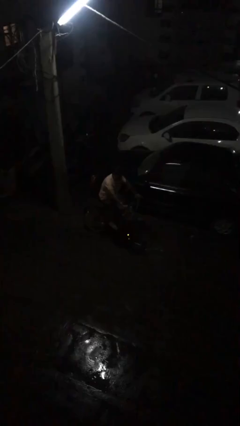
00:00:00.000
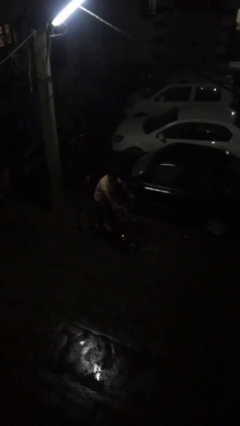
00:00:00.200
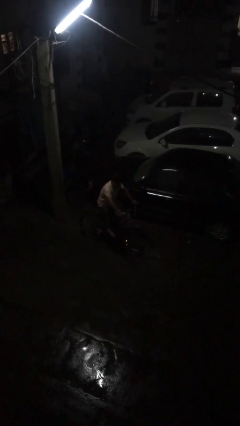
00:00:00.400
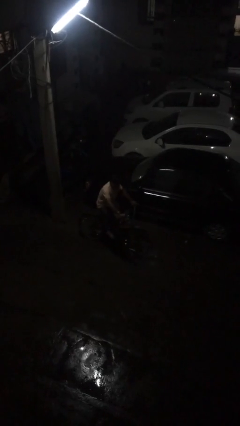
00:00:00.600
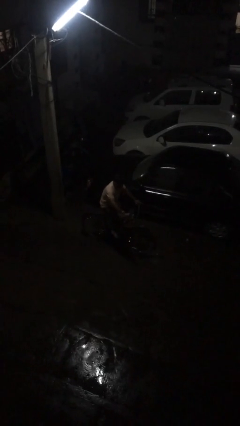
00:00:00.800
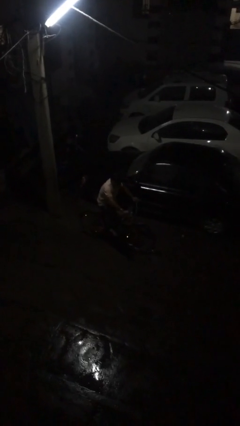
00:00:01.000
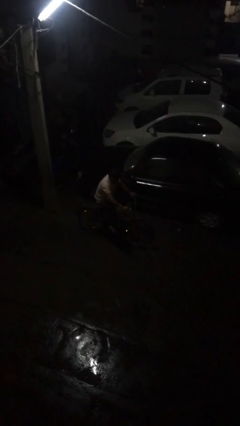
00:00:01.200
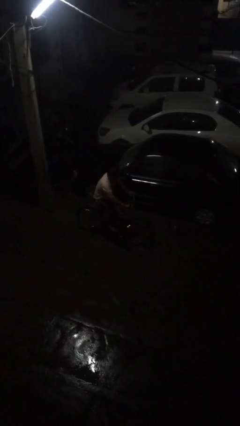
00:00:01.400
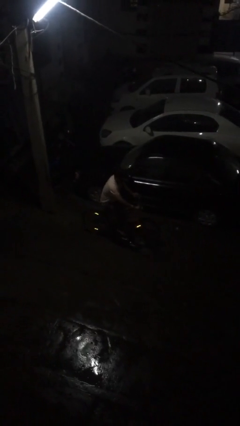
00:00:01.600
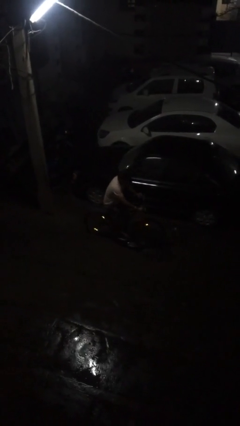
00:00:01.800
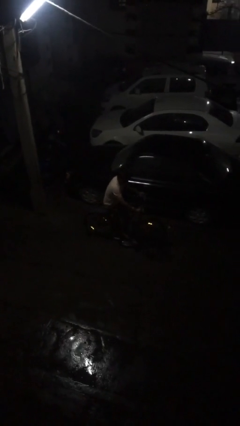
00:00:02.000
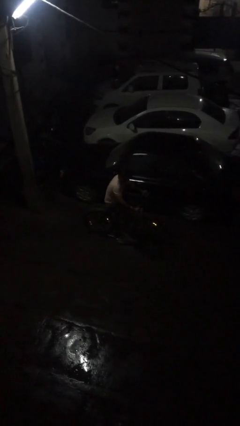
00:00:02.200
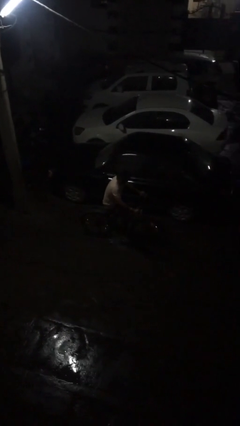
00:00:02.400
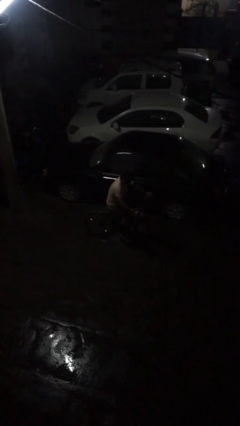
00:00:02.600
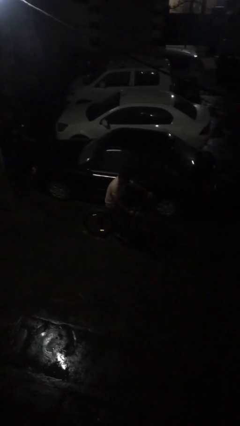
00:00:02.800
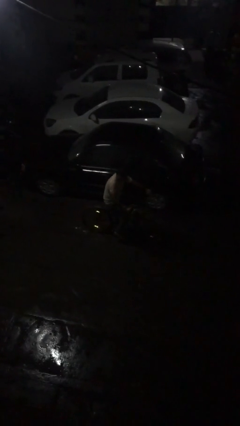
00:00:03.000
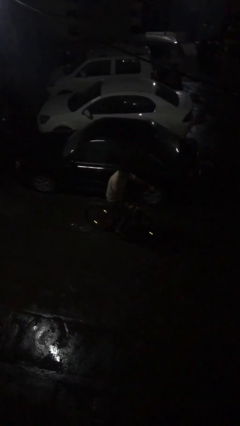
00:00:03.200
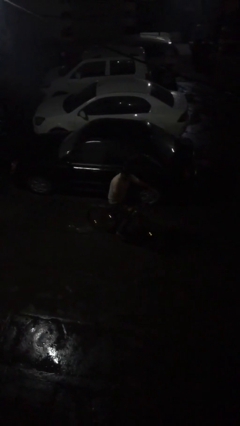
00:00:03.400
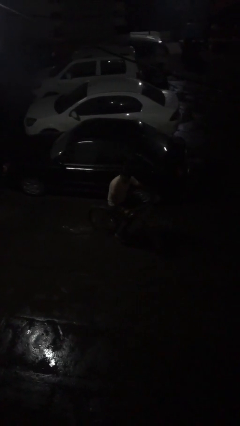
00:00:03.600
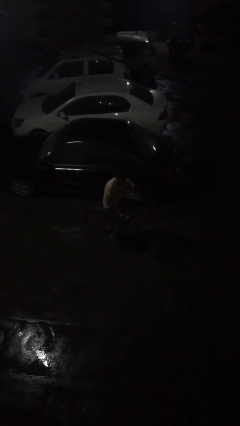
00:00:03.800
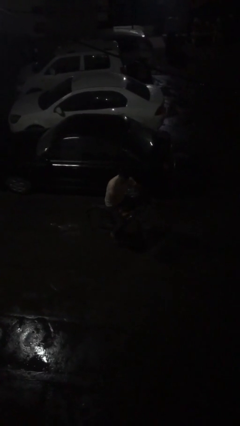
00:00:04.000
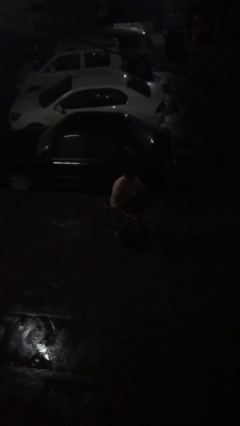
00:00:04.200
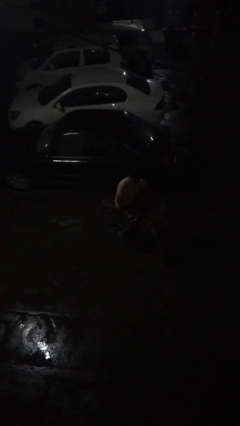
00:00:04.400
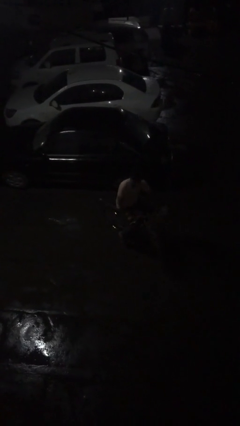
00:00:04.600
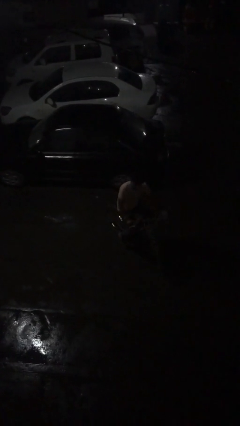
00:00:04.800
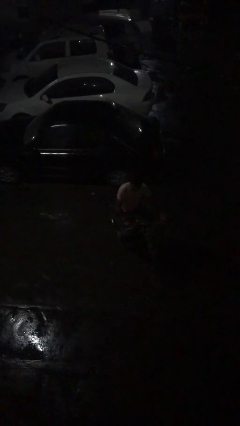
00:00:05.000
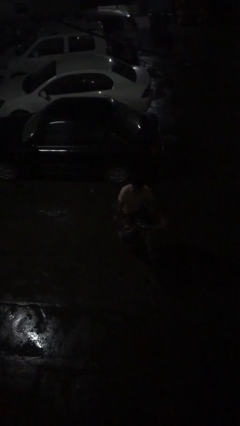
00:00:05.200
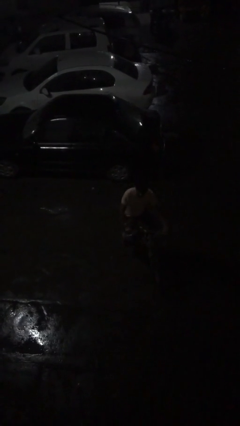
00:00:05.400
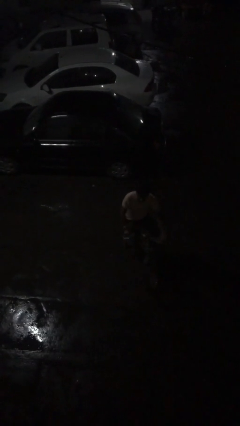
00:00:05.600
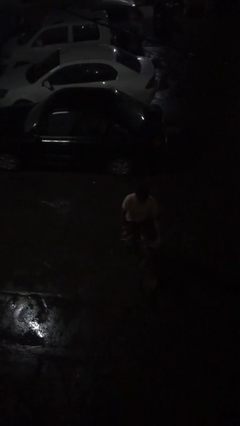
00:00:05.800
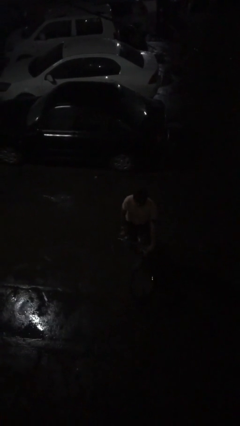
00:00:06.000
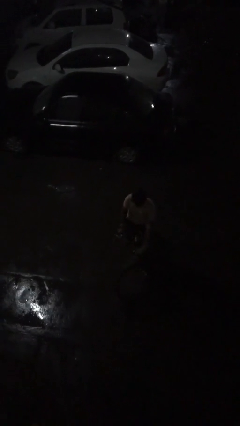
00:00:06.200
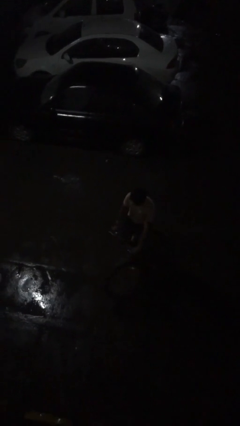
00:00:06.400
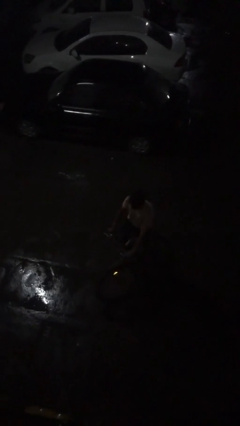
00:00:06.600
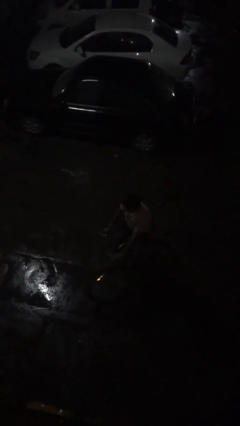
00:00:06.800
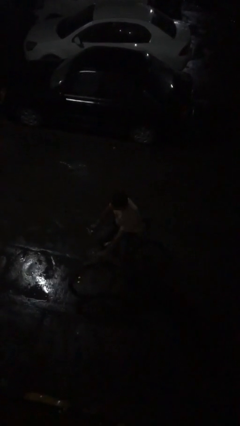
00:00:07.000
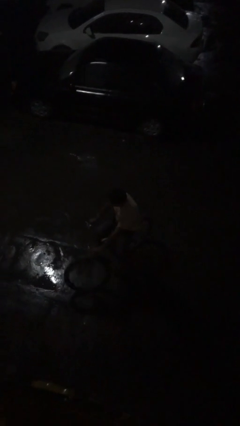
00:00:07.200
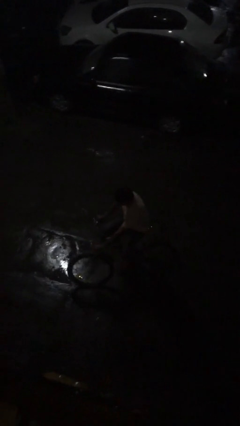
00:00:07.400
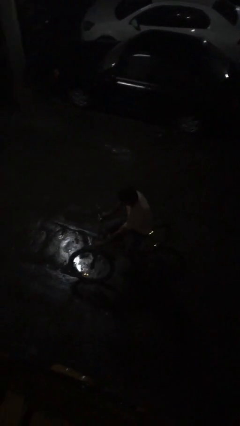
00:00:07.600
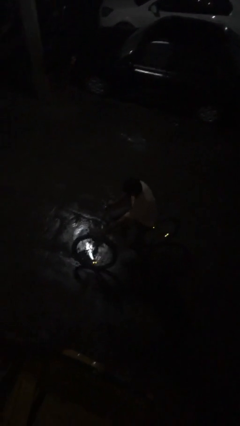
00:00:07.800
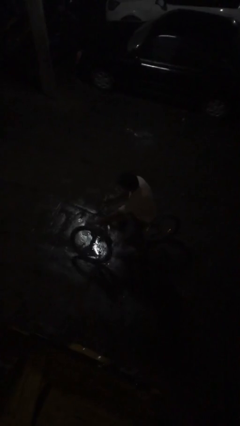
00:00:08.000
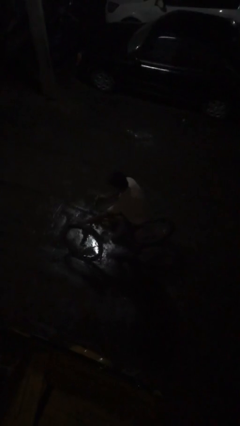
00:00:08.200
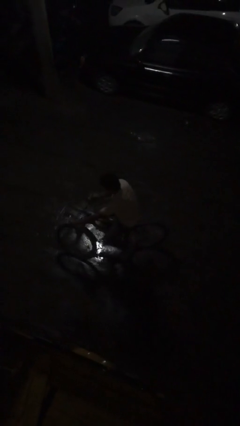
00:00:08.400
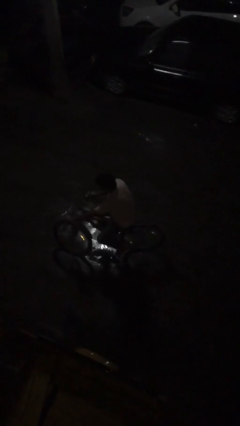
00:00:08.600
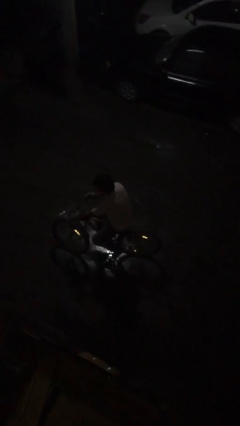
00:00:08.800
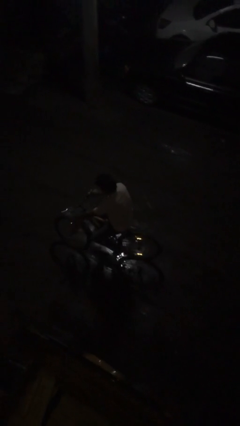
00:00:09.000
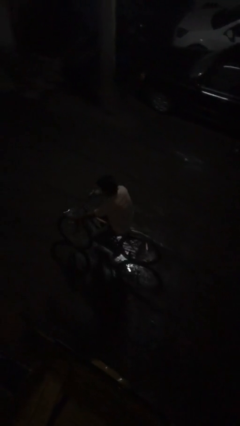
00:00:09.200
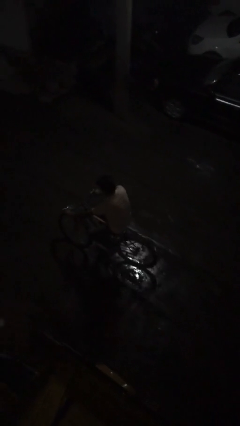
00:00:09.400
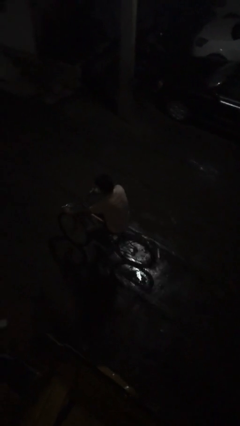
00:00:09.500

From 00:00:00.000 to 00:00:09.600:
person rides bicycle

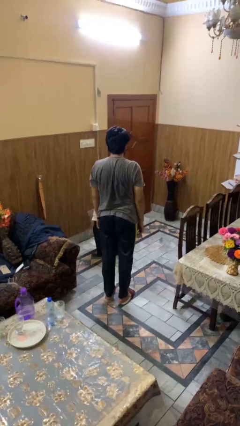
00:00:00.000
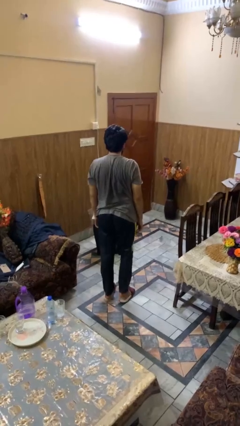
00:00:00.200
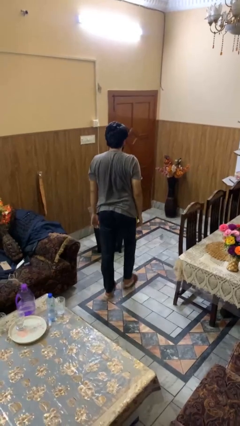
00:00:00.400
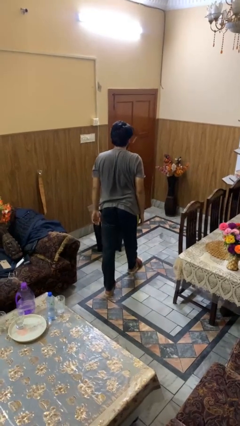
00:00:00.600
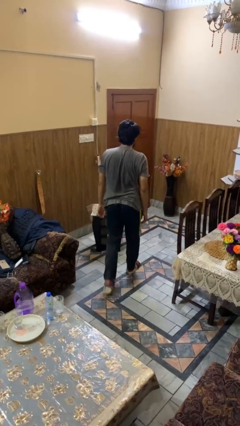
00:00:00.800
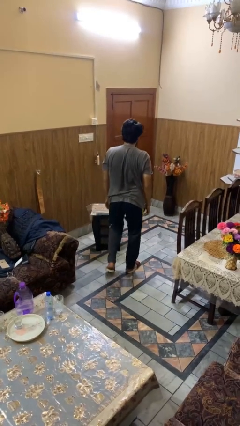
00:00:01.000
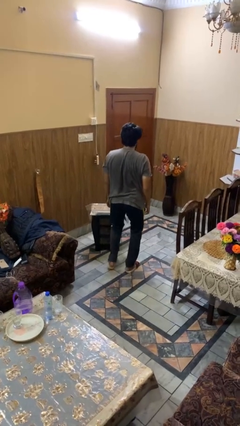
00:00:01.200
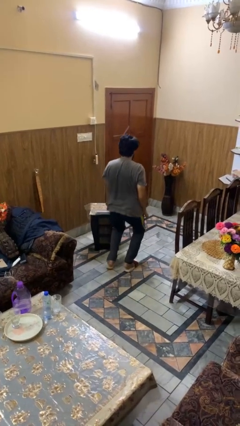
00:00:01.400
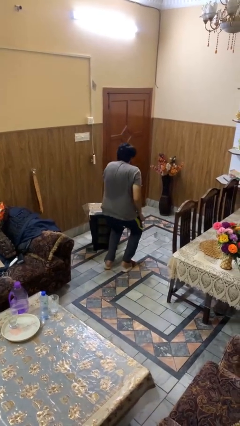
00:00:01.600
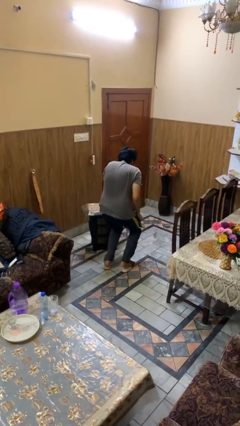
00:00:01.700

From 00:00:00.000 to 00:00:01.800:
person trips on object on floor

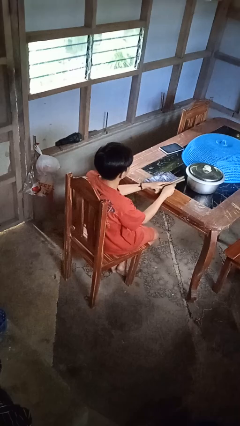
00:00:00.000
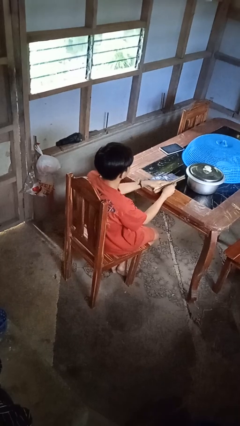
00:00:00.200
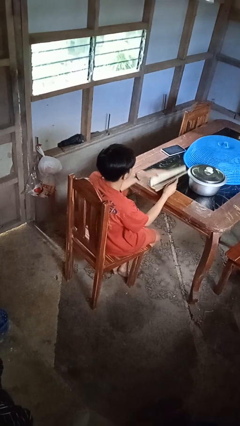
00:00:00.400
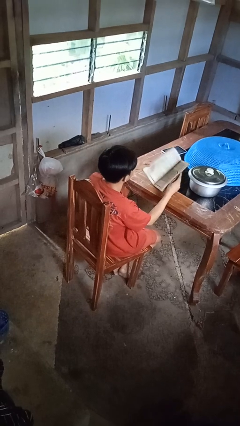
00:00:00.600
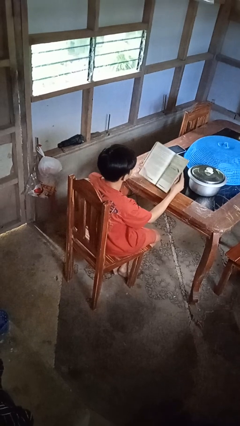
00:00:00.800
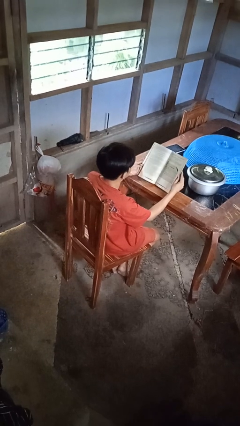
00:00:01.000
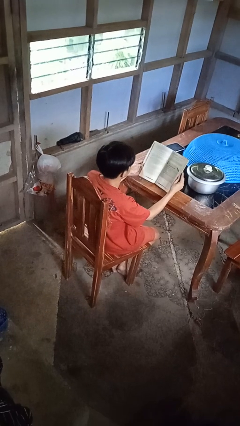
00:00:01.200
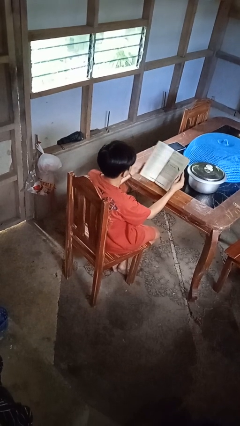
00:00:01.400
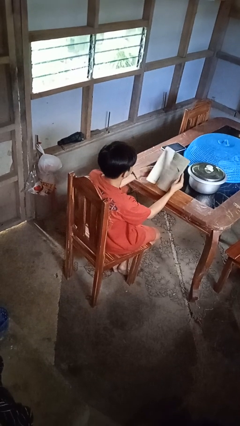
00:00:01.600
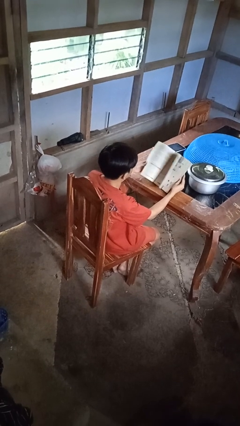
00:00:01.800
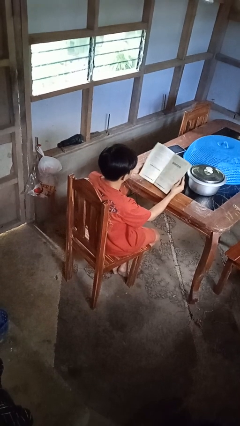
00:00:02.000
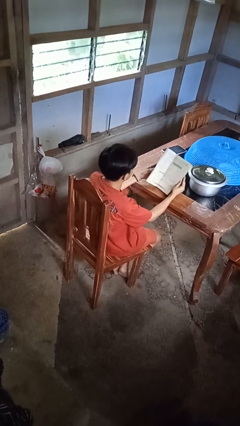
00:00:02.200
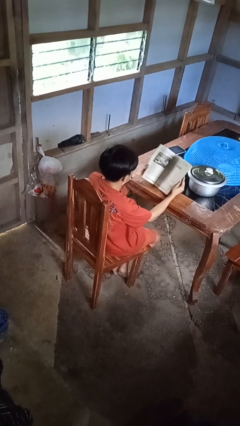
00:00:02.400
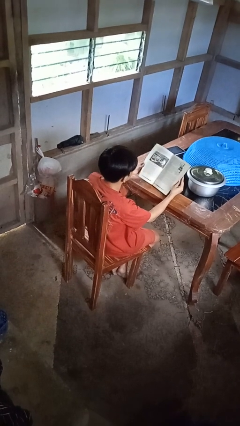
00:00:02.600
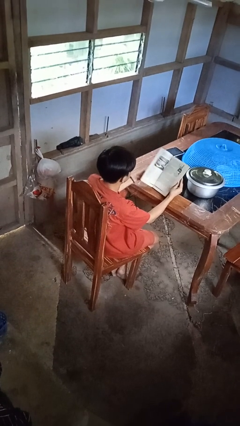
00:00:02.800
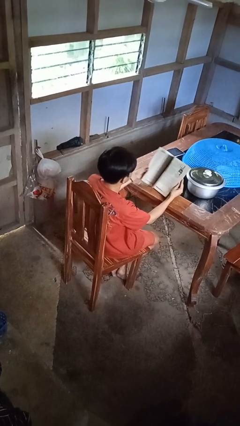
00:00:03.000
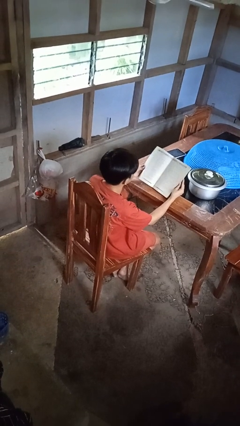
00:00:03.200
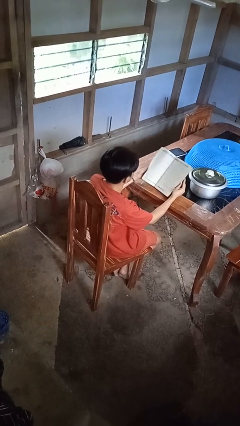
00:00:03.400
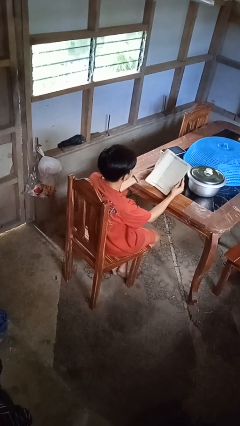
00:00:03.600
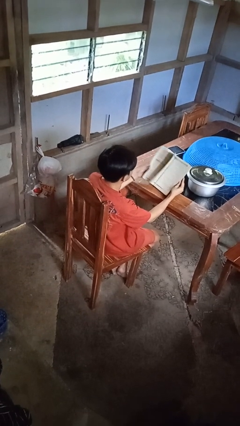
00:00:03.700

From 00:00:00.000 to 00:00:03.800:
person reads book

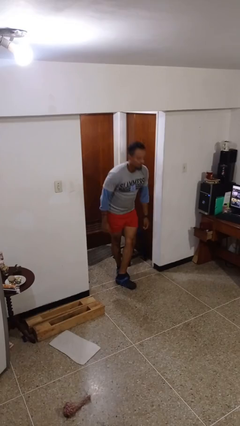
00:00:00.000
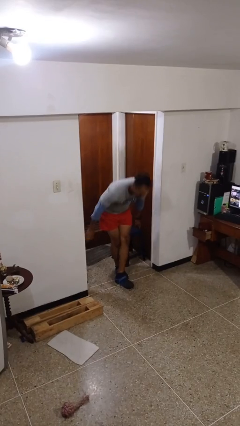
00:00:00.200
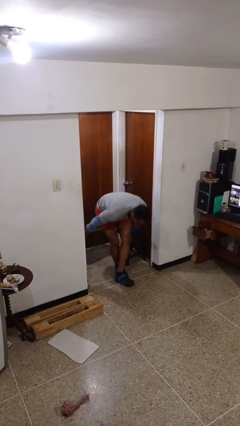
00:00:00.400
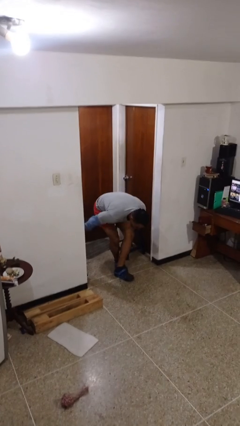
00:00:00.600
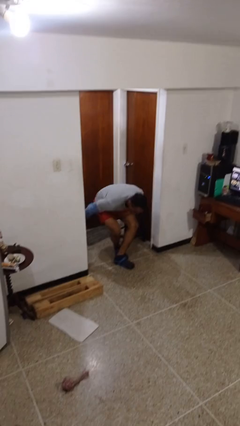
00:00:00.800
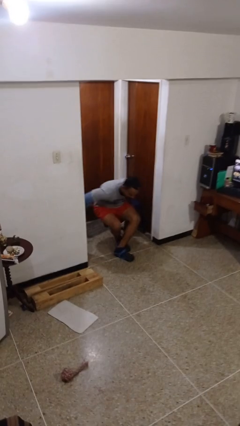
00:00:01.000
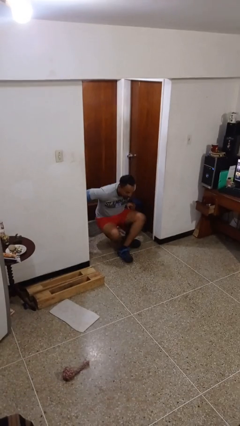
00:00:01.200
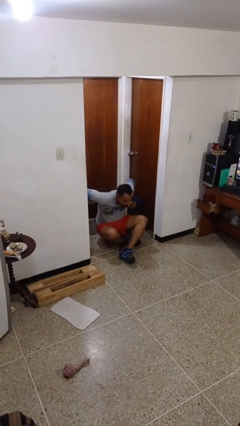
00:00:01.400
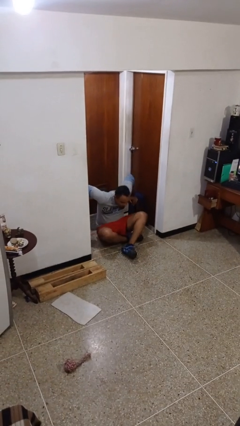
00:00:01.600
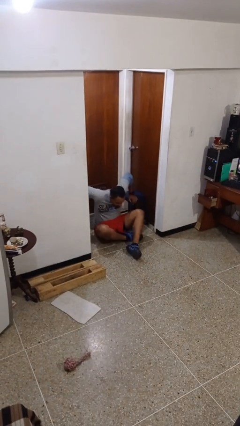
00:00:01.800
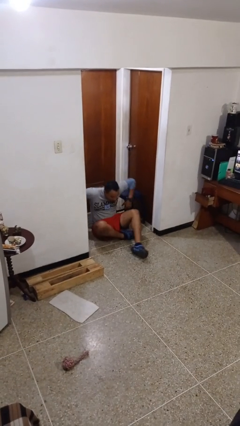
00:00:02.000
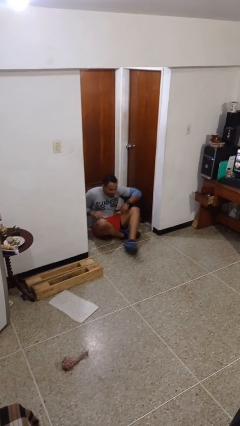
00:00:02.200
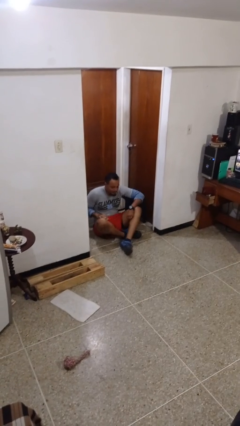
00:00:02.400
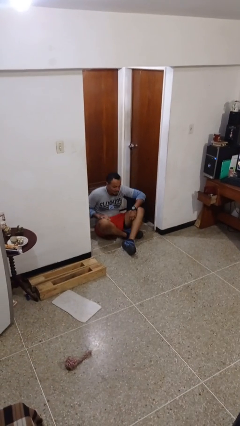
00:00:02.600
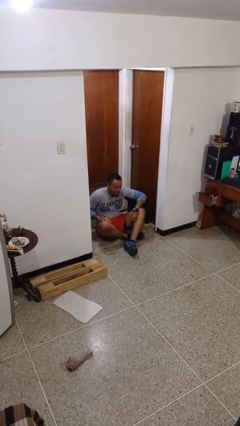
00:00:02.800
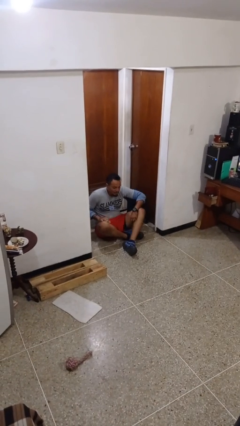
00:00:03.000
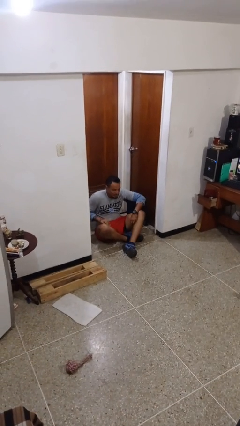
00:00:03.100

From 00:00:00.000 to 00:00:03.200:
person sits crisscross
